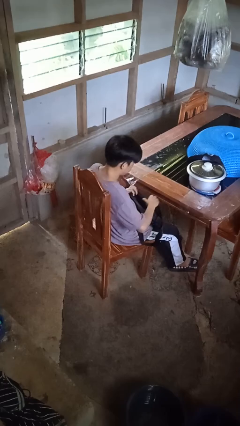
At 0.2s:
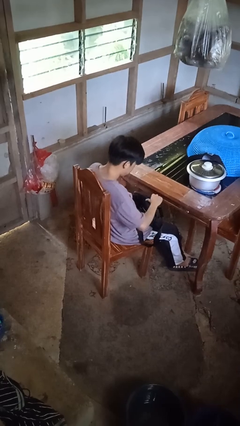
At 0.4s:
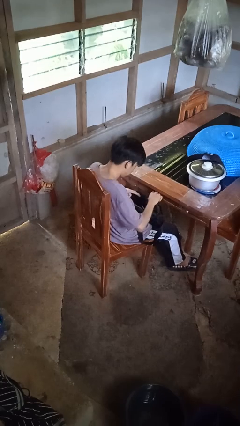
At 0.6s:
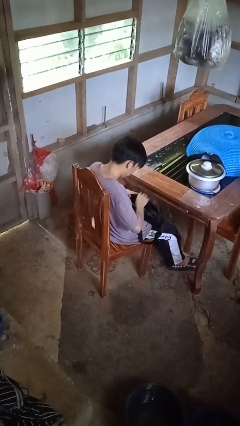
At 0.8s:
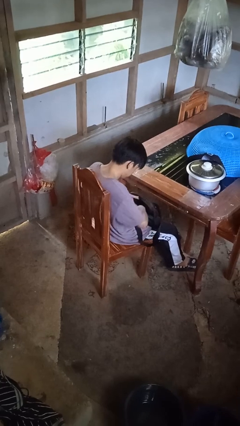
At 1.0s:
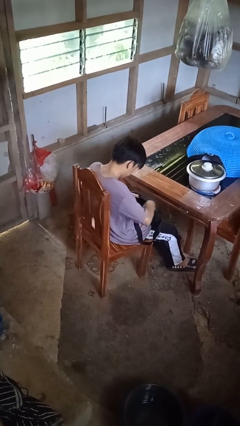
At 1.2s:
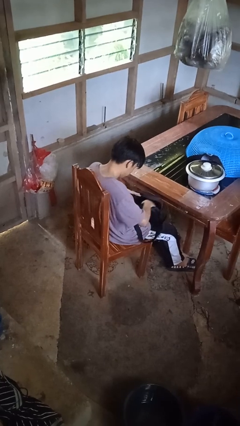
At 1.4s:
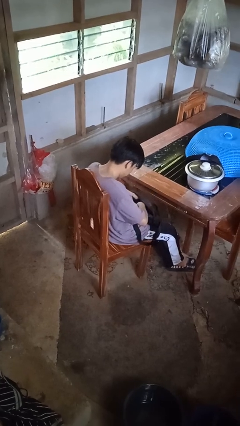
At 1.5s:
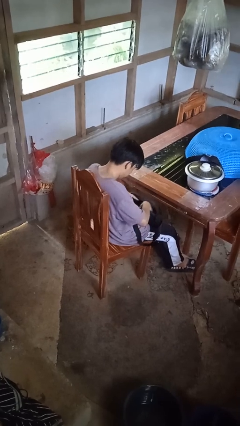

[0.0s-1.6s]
person searches in purse

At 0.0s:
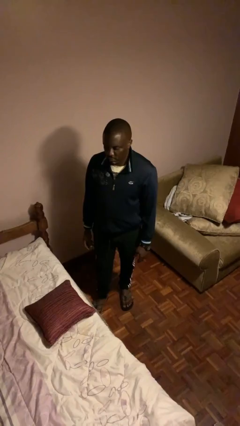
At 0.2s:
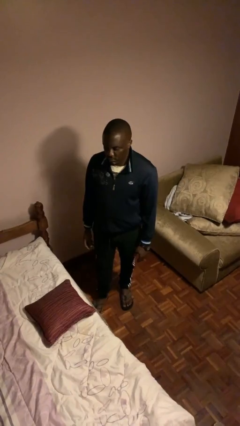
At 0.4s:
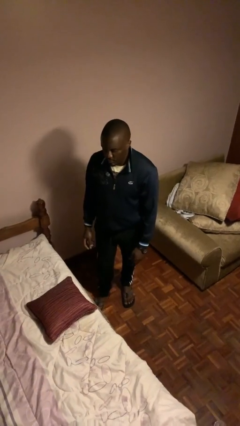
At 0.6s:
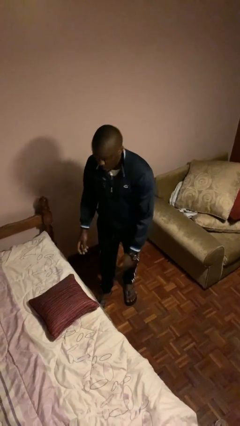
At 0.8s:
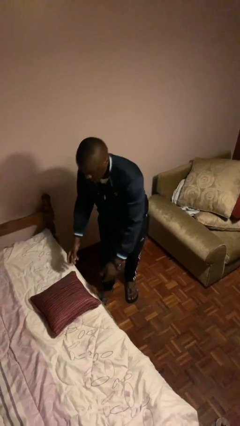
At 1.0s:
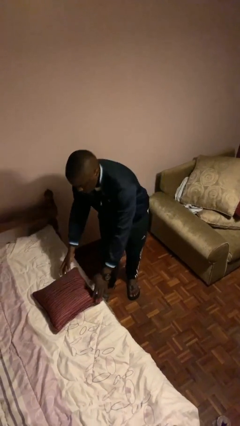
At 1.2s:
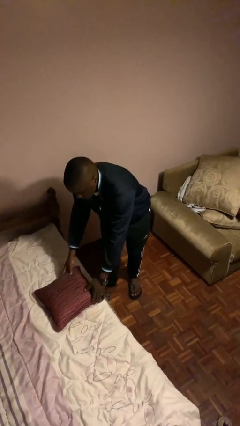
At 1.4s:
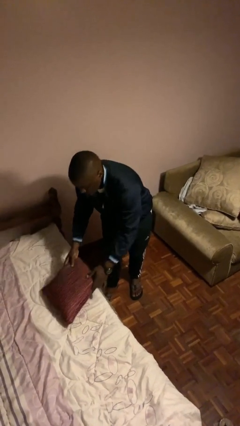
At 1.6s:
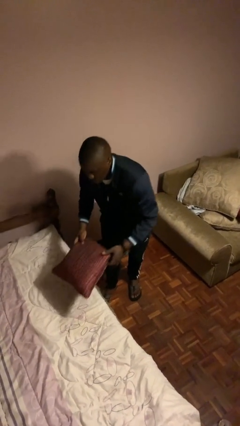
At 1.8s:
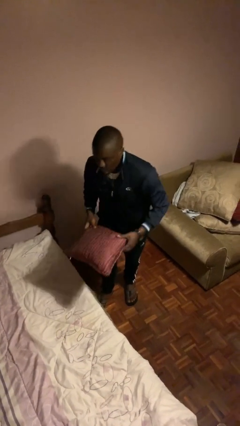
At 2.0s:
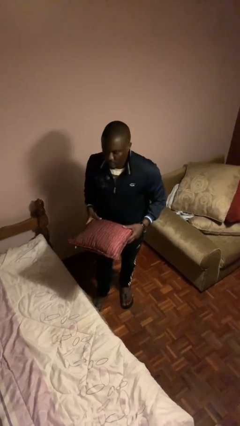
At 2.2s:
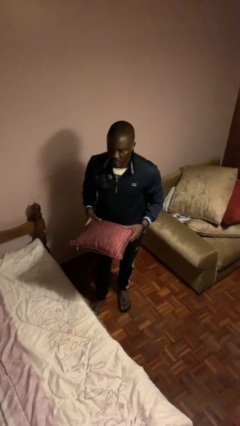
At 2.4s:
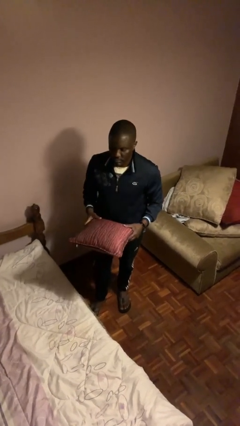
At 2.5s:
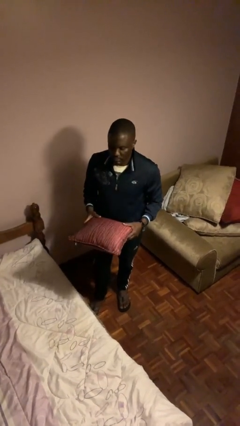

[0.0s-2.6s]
person picks up object from bed

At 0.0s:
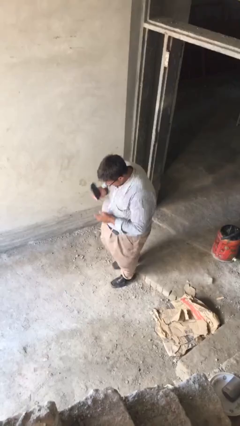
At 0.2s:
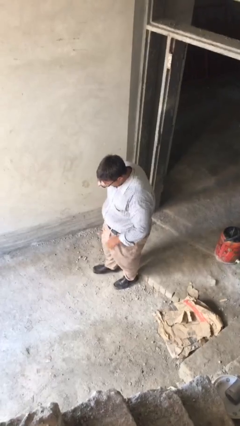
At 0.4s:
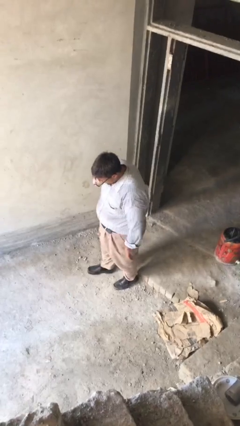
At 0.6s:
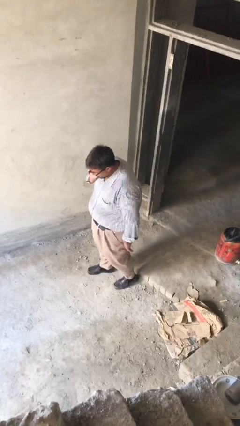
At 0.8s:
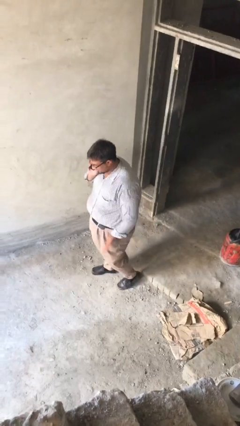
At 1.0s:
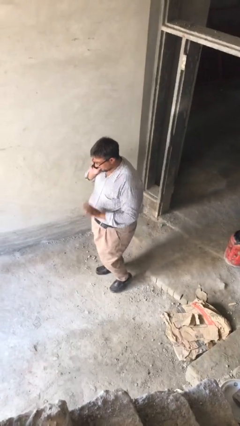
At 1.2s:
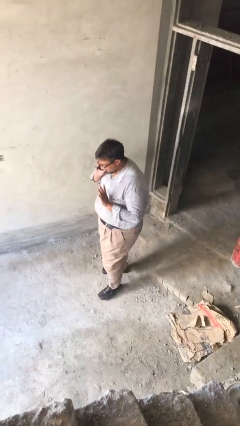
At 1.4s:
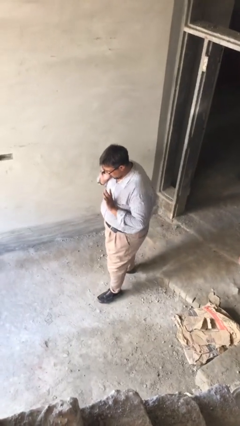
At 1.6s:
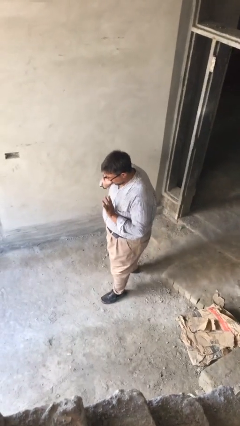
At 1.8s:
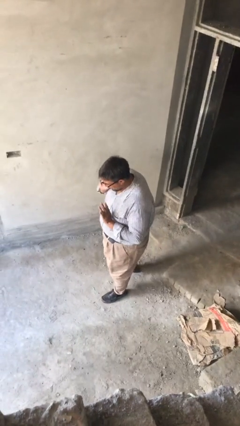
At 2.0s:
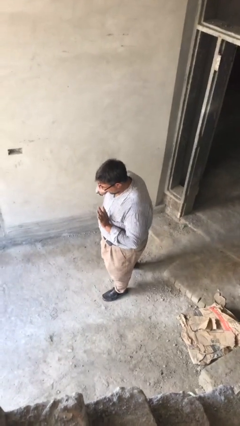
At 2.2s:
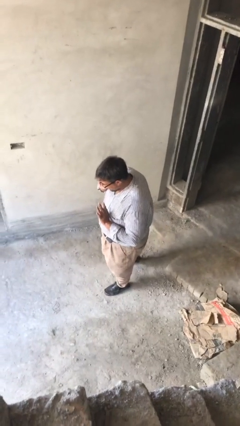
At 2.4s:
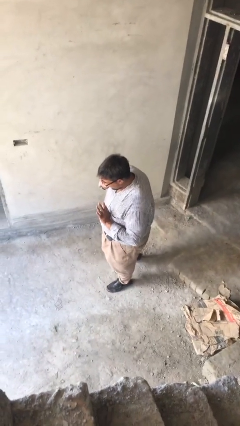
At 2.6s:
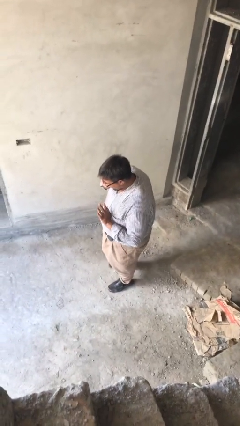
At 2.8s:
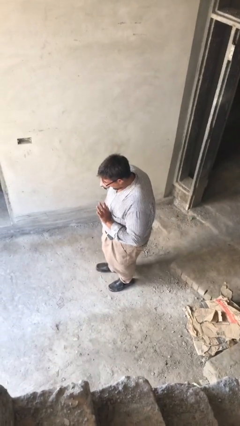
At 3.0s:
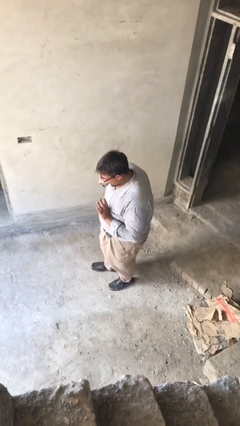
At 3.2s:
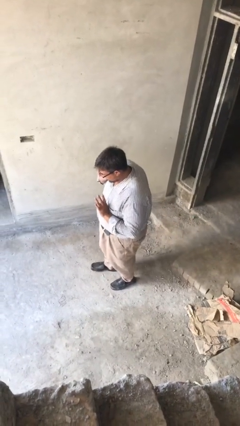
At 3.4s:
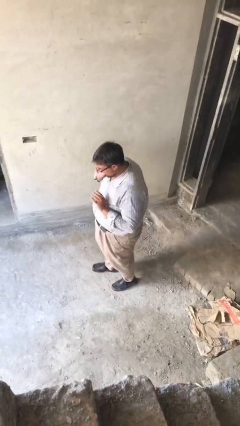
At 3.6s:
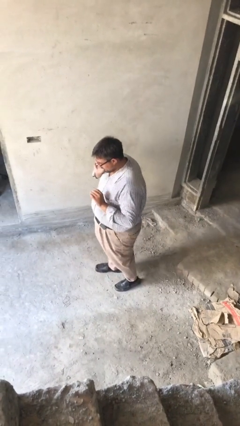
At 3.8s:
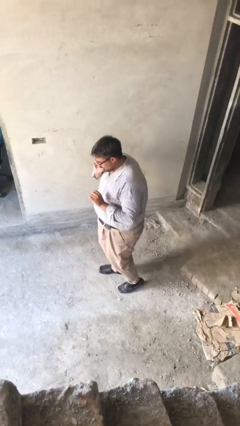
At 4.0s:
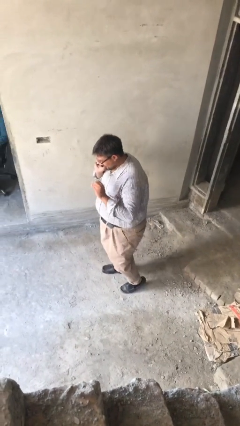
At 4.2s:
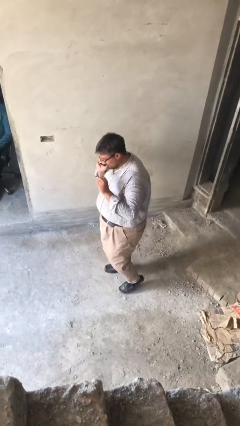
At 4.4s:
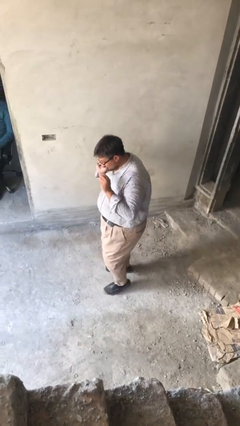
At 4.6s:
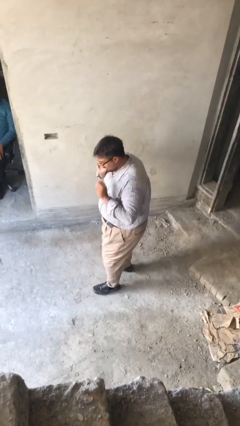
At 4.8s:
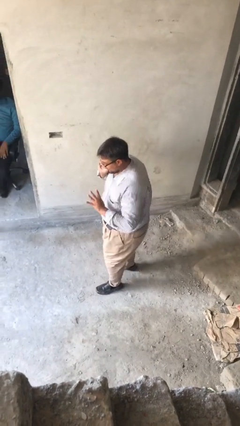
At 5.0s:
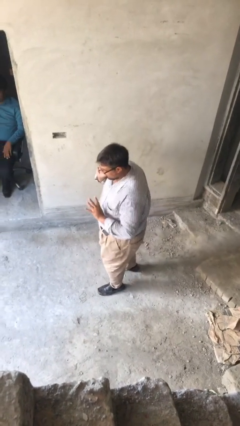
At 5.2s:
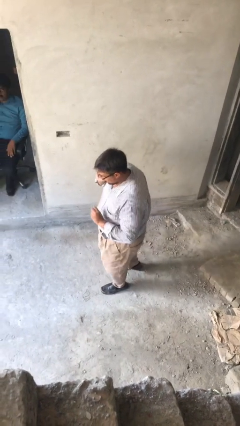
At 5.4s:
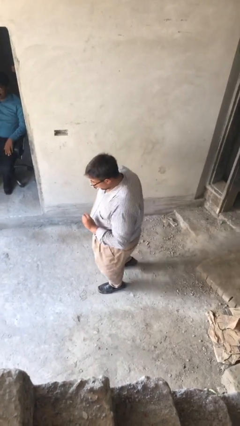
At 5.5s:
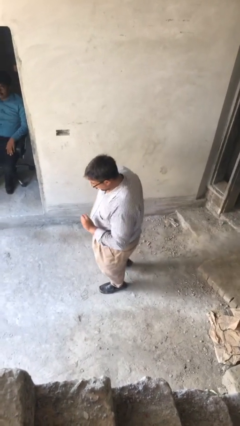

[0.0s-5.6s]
person talks on phone

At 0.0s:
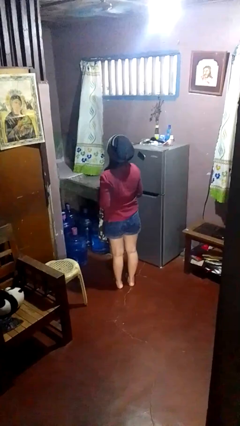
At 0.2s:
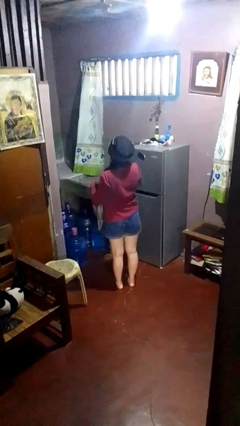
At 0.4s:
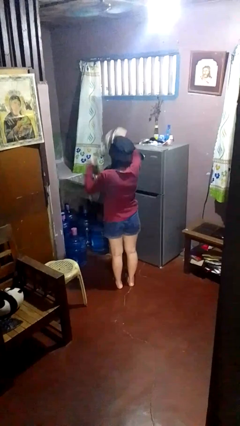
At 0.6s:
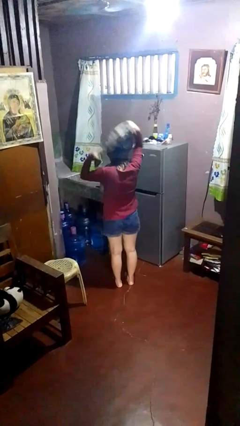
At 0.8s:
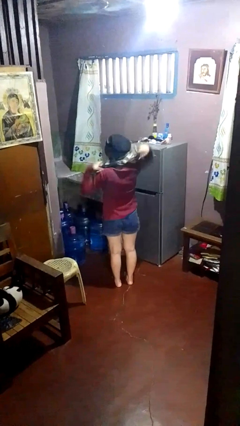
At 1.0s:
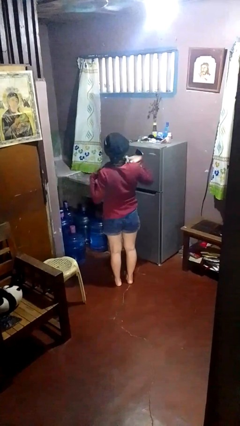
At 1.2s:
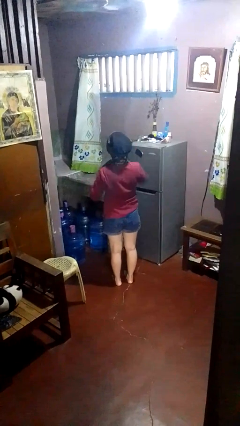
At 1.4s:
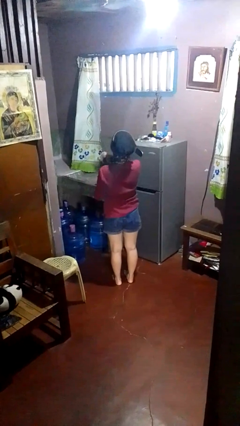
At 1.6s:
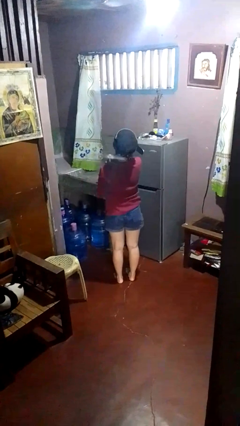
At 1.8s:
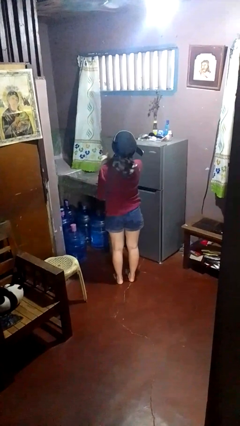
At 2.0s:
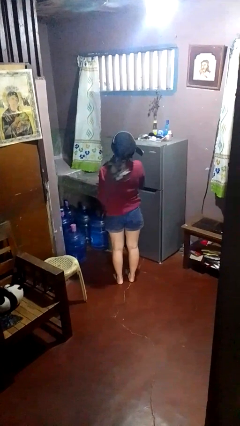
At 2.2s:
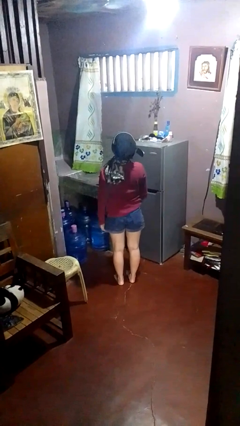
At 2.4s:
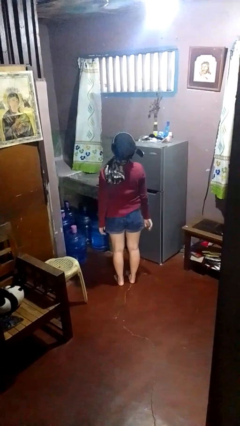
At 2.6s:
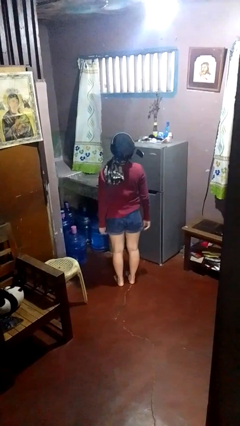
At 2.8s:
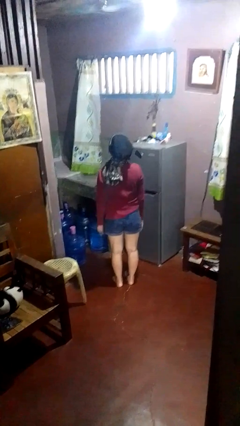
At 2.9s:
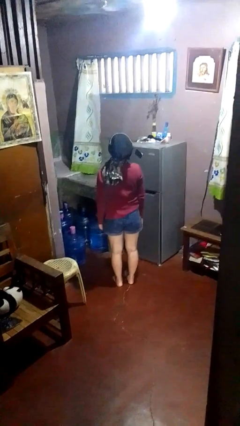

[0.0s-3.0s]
person puts on scarf

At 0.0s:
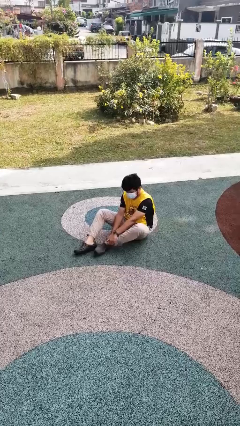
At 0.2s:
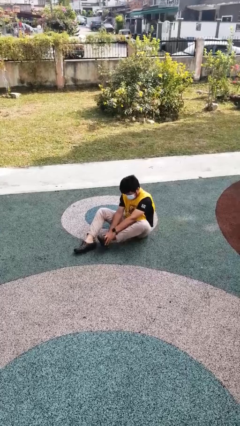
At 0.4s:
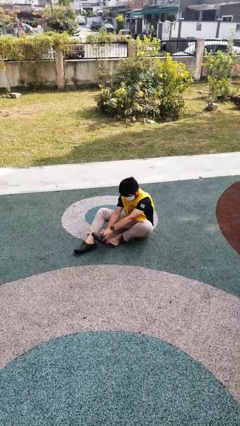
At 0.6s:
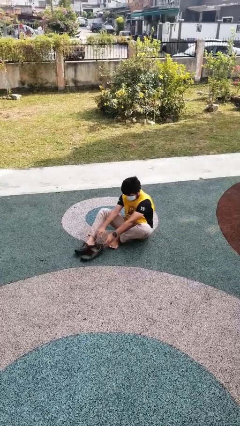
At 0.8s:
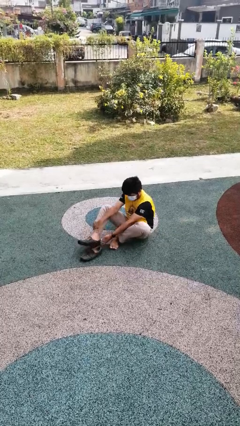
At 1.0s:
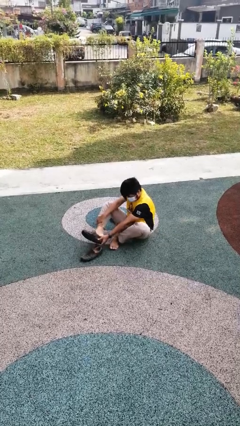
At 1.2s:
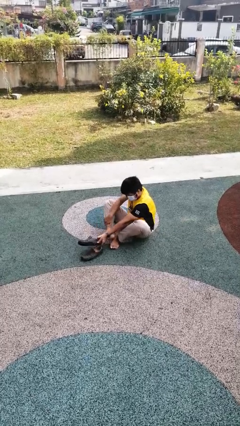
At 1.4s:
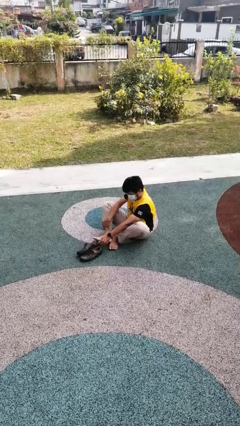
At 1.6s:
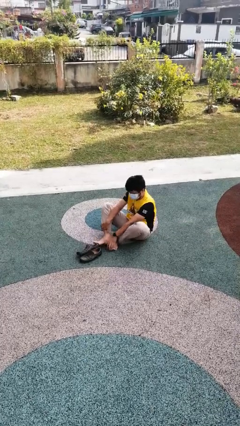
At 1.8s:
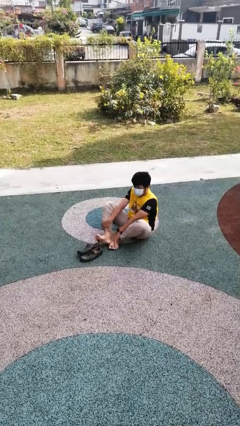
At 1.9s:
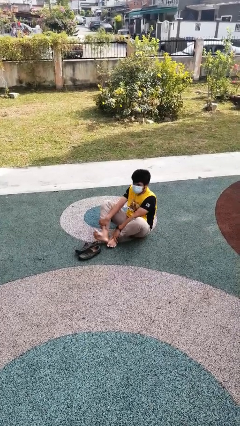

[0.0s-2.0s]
person takes off shoes

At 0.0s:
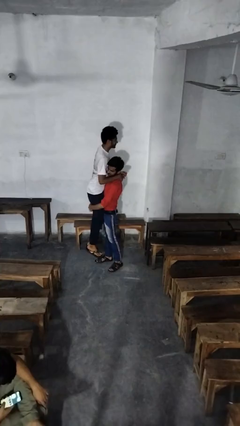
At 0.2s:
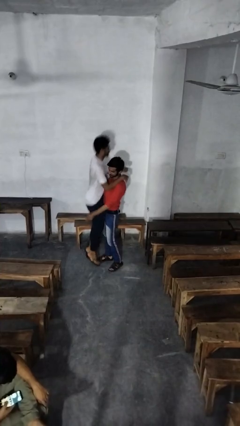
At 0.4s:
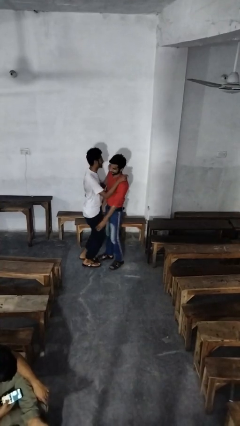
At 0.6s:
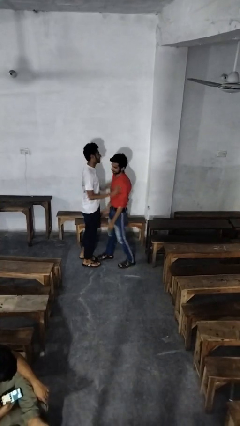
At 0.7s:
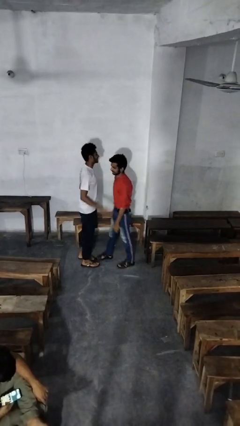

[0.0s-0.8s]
person puts down person

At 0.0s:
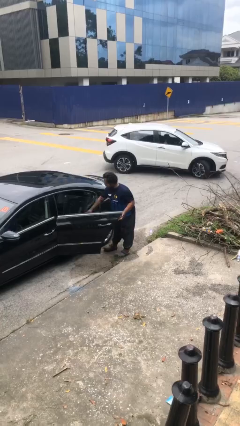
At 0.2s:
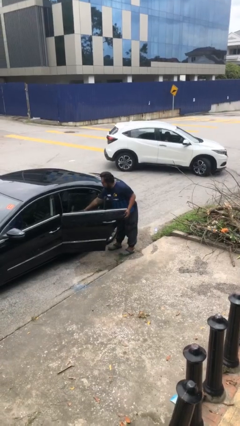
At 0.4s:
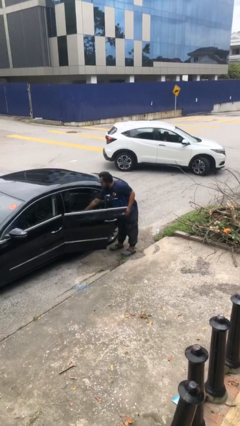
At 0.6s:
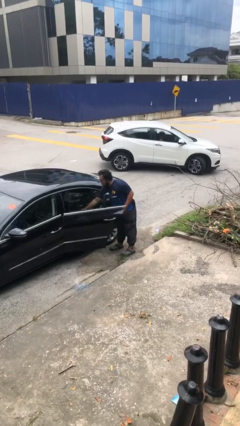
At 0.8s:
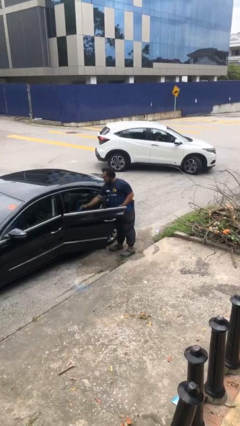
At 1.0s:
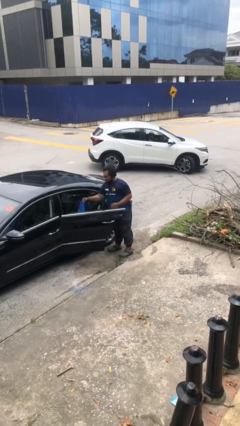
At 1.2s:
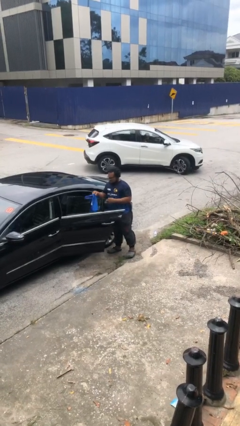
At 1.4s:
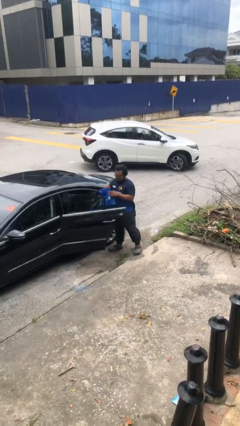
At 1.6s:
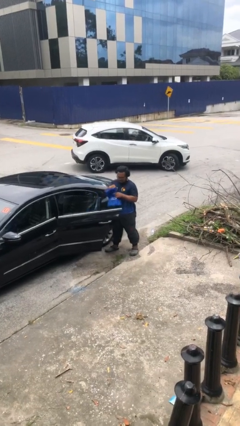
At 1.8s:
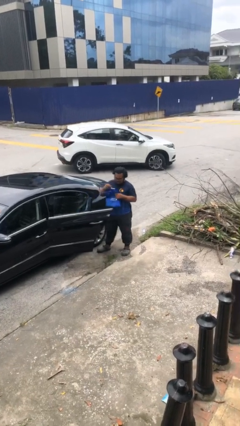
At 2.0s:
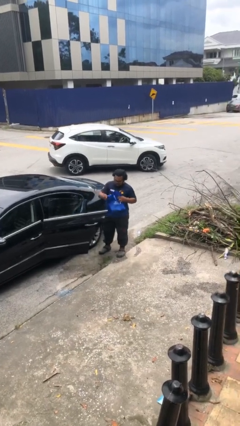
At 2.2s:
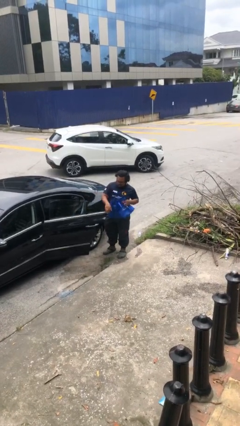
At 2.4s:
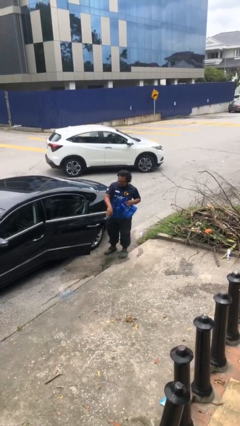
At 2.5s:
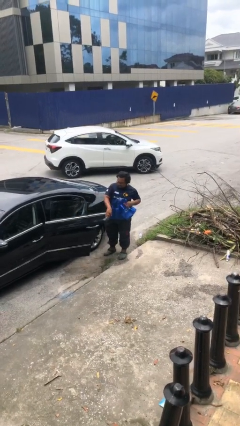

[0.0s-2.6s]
person unloads car
